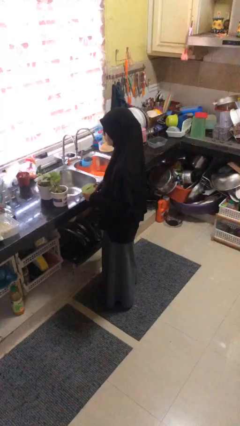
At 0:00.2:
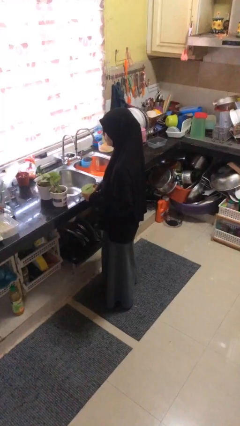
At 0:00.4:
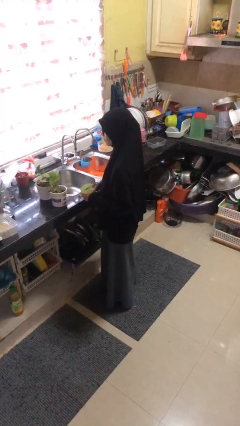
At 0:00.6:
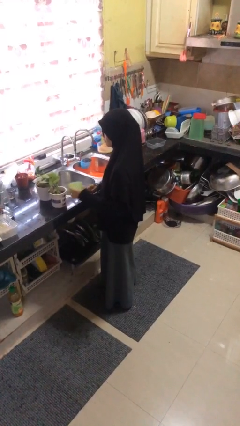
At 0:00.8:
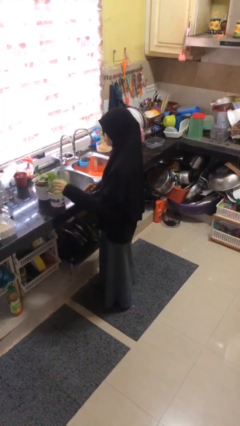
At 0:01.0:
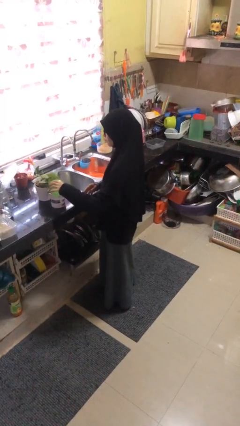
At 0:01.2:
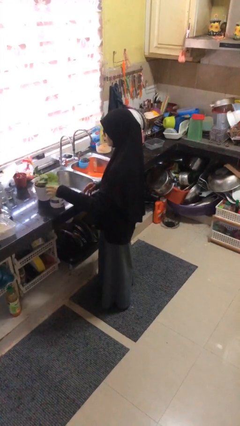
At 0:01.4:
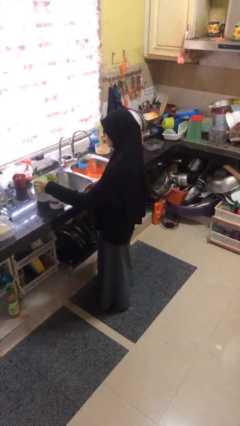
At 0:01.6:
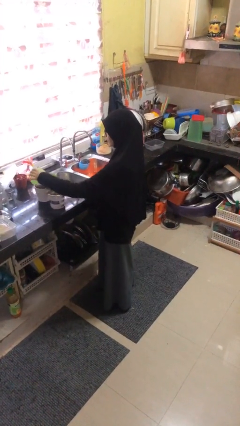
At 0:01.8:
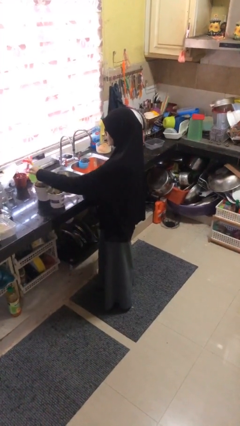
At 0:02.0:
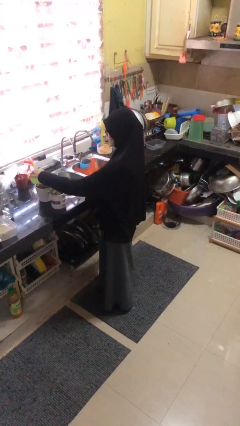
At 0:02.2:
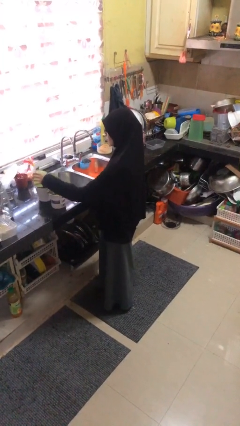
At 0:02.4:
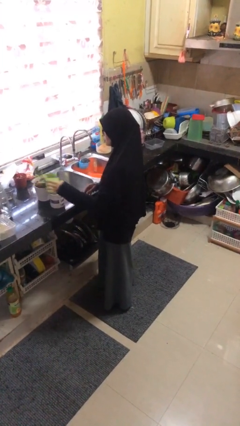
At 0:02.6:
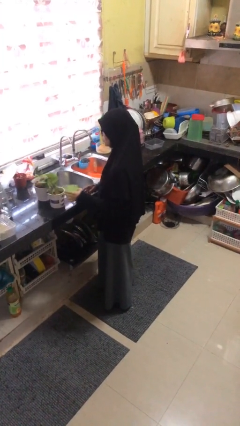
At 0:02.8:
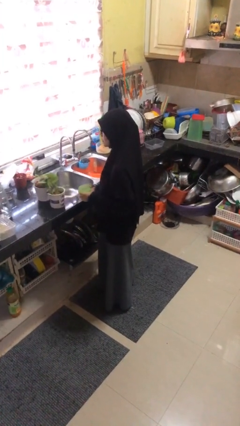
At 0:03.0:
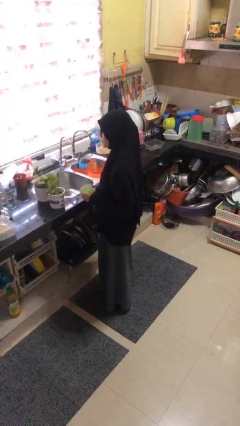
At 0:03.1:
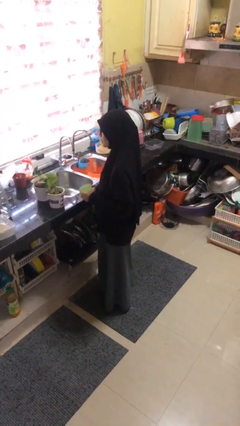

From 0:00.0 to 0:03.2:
person waters houseplant

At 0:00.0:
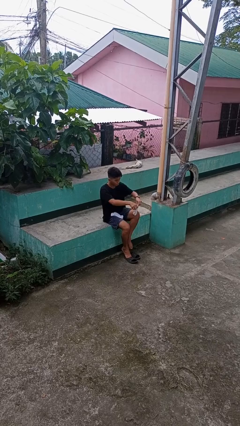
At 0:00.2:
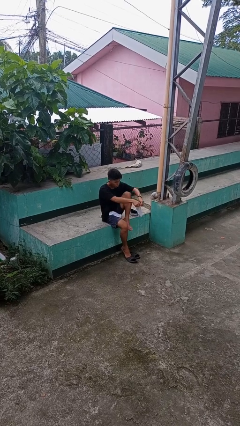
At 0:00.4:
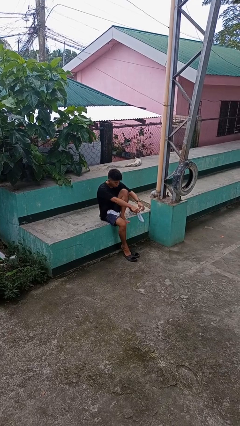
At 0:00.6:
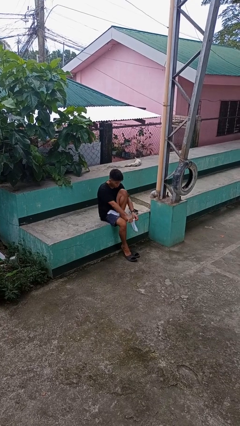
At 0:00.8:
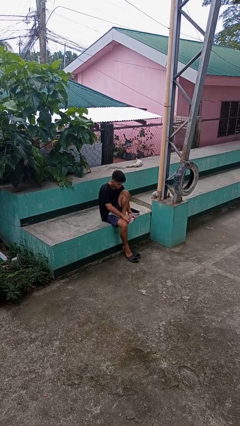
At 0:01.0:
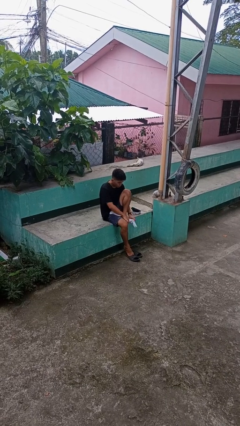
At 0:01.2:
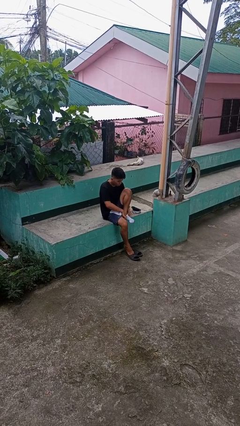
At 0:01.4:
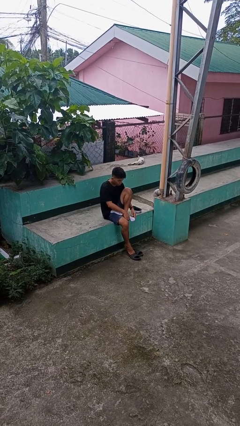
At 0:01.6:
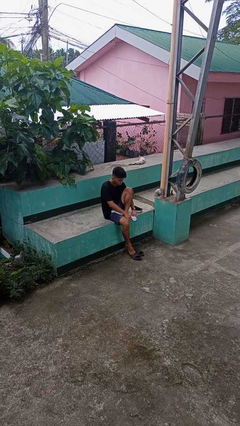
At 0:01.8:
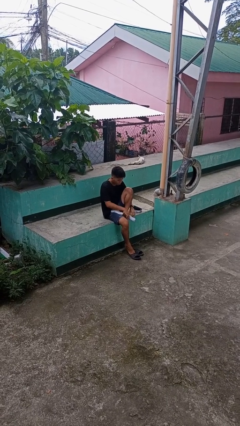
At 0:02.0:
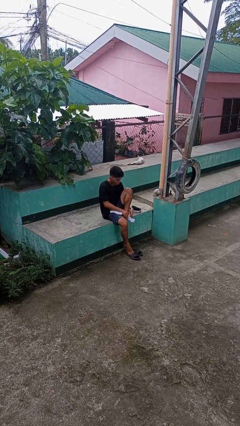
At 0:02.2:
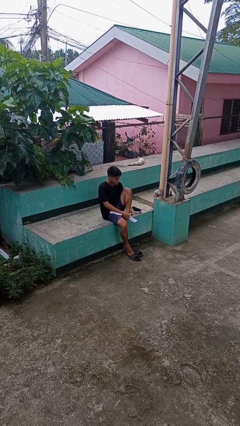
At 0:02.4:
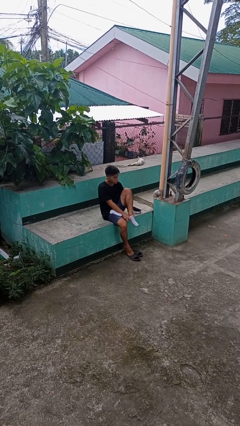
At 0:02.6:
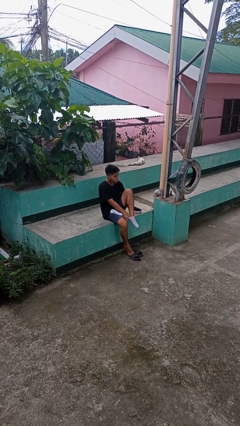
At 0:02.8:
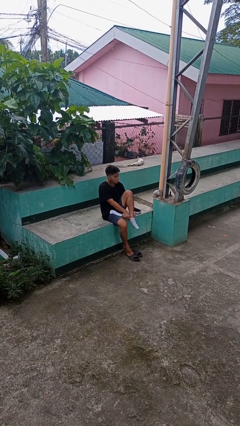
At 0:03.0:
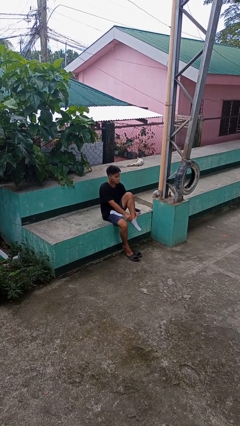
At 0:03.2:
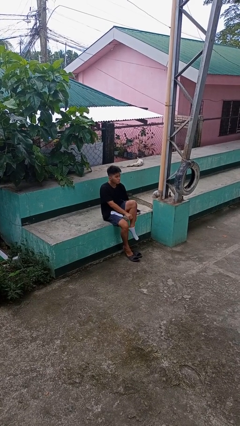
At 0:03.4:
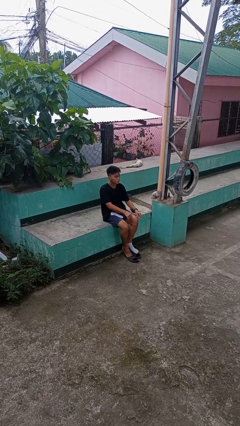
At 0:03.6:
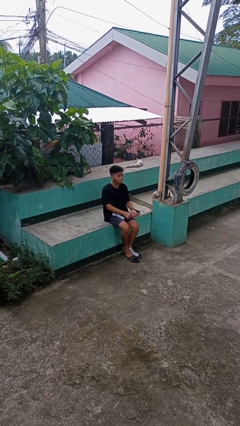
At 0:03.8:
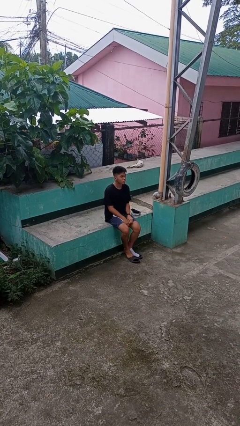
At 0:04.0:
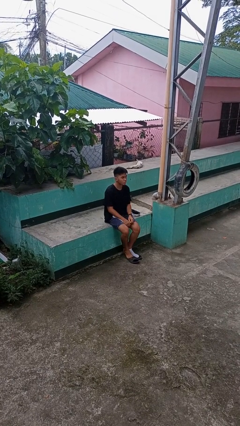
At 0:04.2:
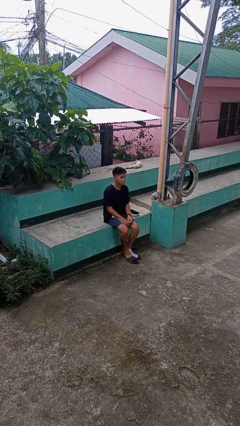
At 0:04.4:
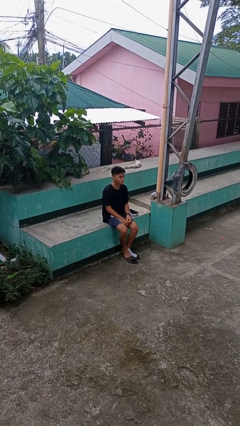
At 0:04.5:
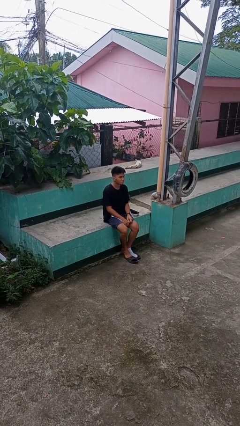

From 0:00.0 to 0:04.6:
person puts on socks

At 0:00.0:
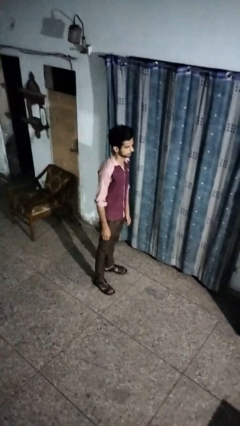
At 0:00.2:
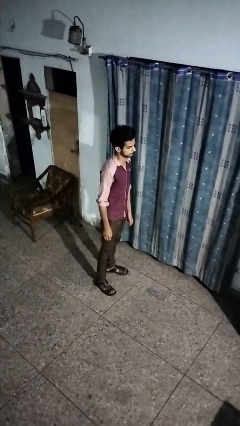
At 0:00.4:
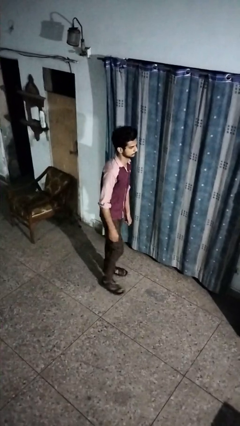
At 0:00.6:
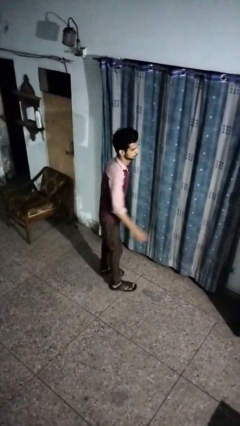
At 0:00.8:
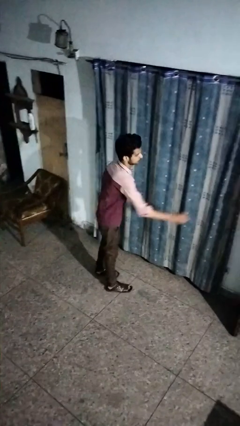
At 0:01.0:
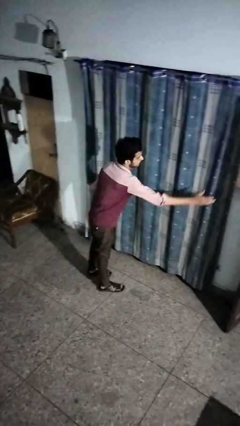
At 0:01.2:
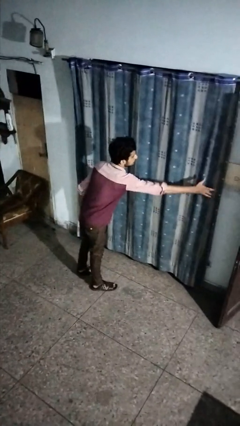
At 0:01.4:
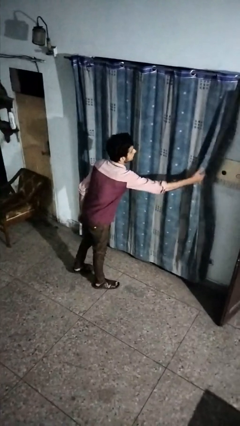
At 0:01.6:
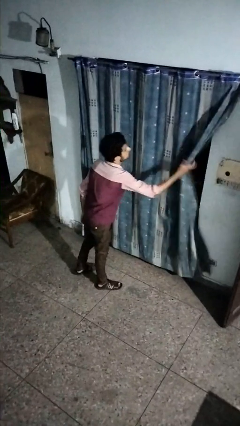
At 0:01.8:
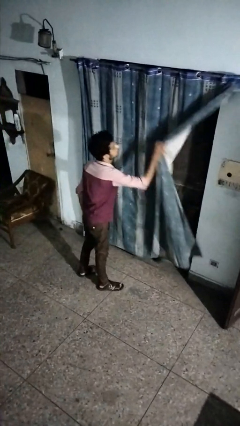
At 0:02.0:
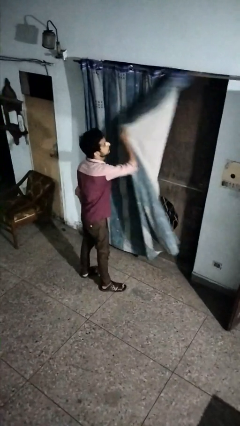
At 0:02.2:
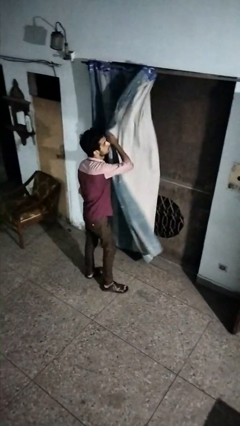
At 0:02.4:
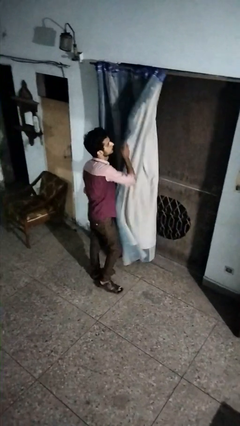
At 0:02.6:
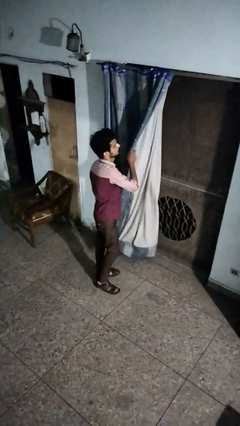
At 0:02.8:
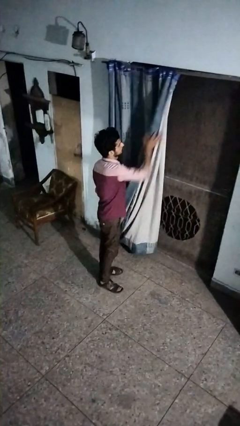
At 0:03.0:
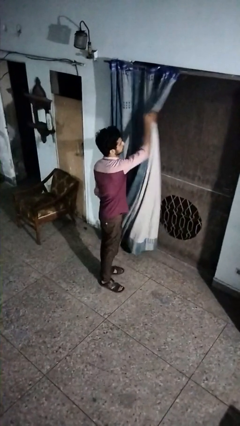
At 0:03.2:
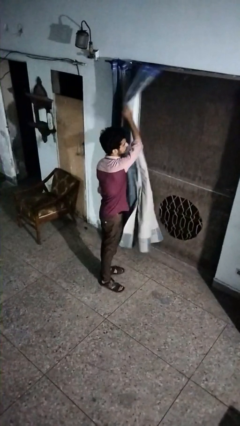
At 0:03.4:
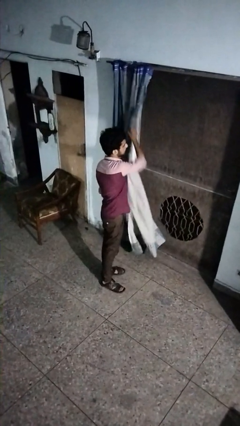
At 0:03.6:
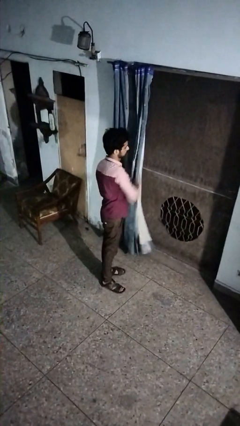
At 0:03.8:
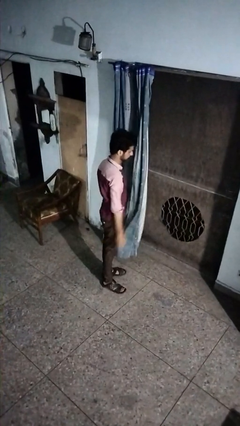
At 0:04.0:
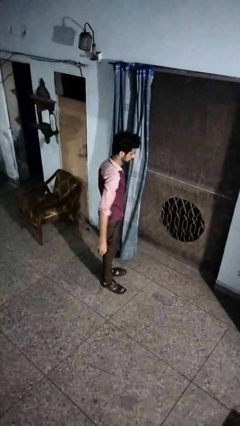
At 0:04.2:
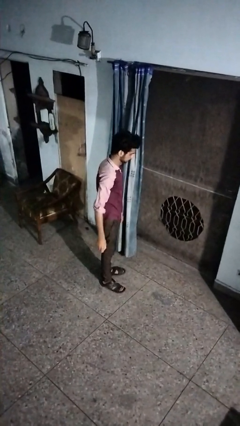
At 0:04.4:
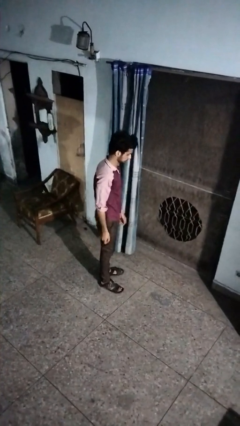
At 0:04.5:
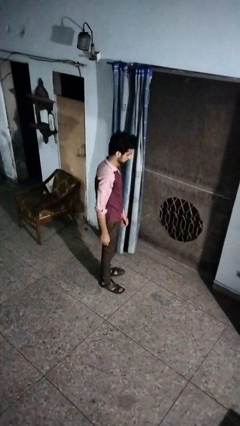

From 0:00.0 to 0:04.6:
person opens curtains

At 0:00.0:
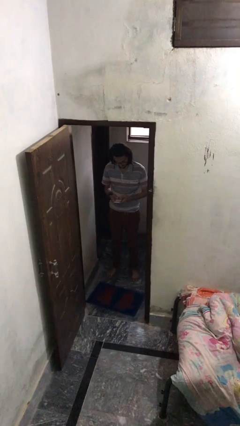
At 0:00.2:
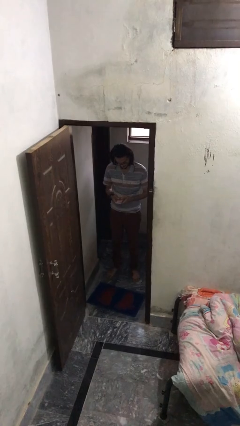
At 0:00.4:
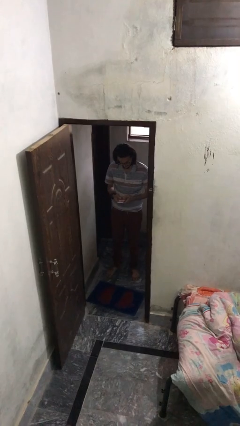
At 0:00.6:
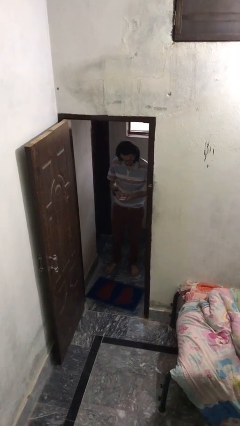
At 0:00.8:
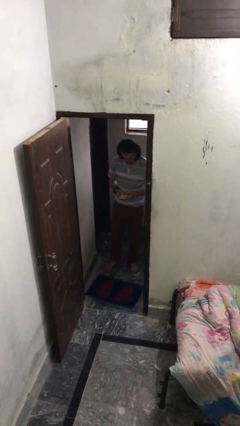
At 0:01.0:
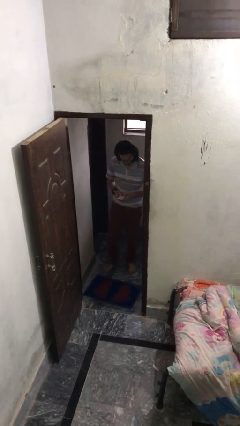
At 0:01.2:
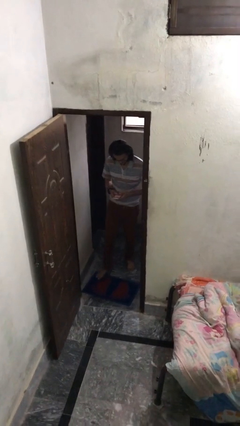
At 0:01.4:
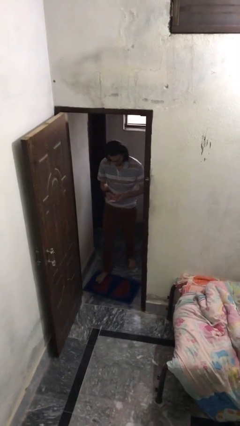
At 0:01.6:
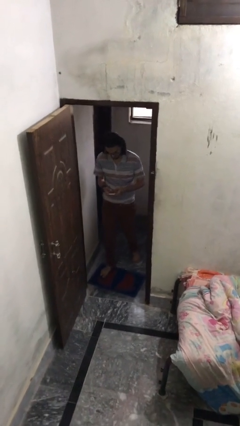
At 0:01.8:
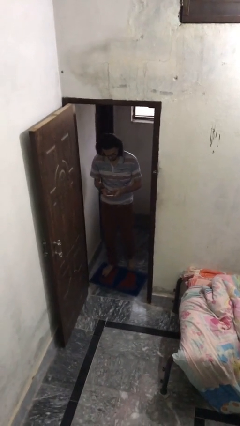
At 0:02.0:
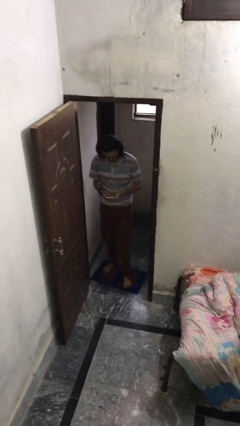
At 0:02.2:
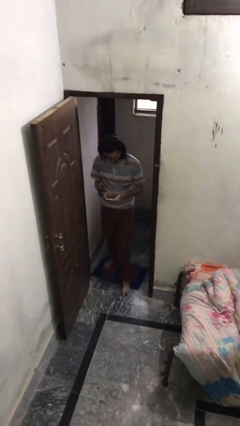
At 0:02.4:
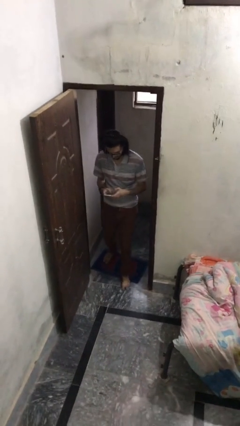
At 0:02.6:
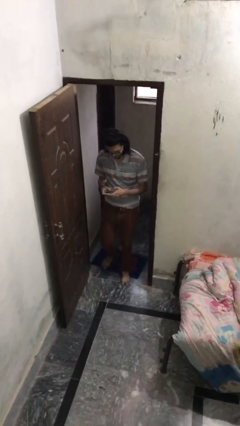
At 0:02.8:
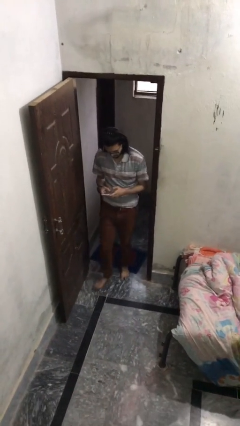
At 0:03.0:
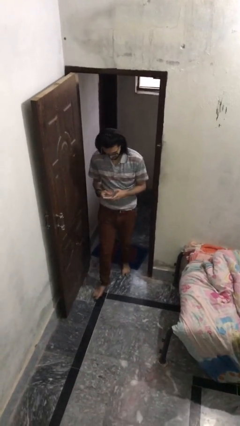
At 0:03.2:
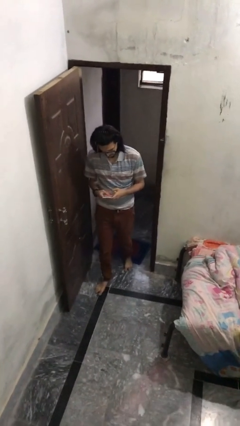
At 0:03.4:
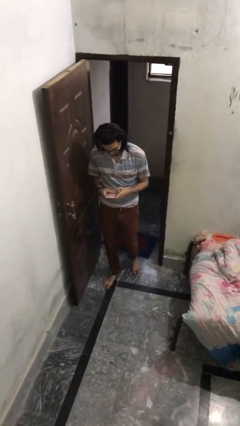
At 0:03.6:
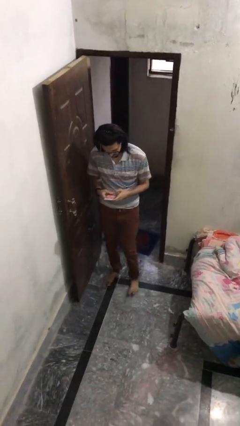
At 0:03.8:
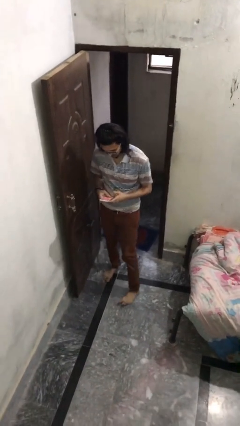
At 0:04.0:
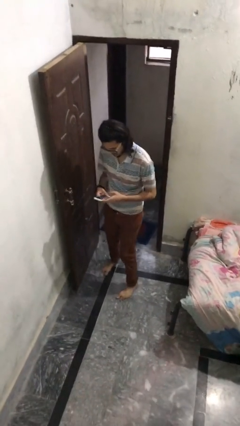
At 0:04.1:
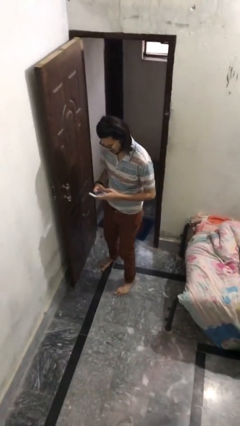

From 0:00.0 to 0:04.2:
person enters scene through structure

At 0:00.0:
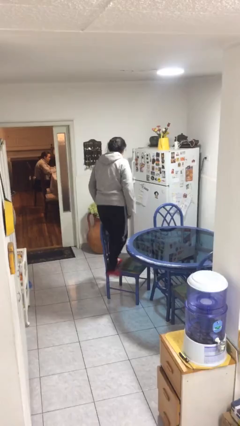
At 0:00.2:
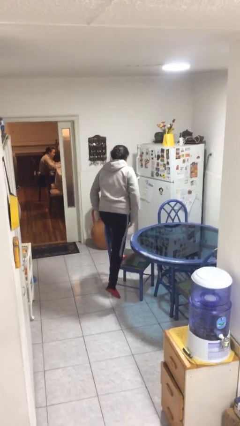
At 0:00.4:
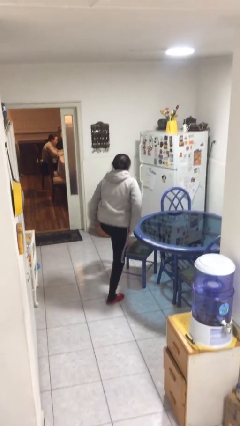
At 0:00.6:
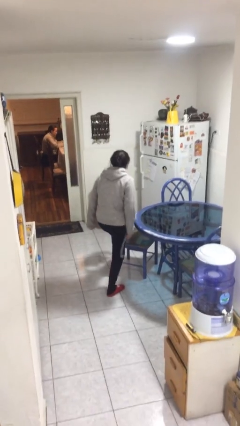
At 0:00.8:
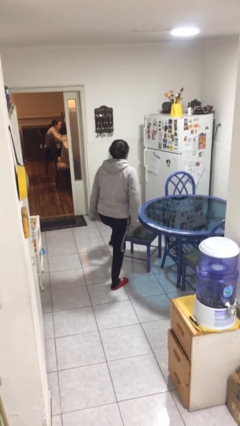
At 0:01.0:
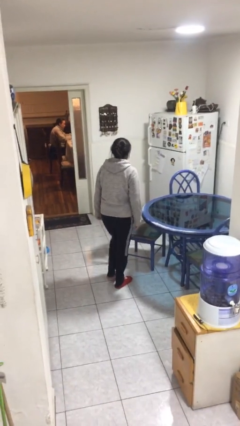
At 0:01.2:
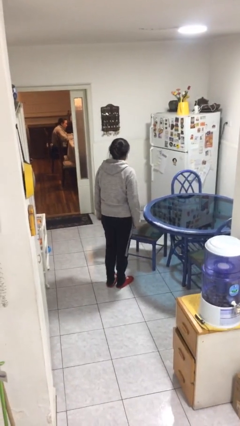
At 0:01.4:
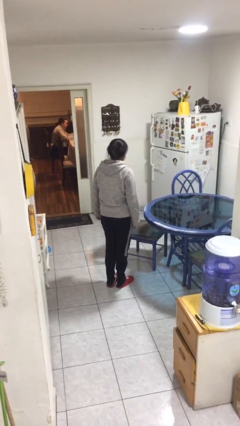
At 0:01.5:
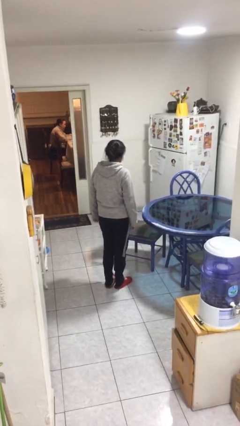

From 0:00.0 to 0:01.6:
person climbs off chair
